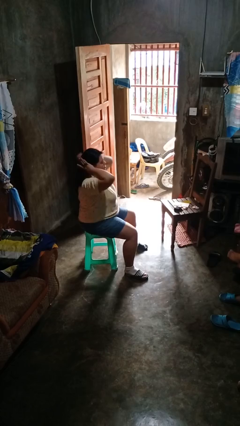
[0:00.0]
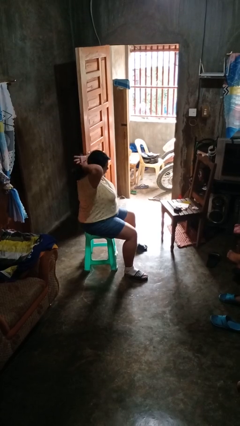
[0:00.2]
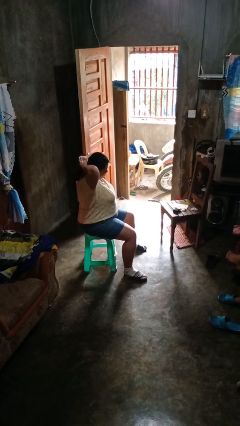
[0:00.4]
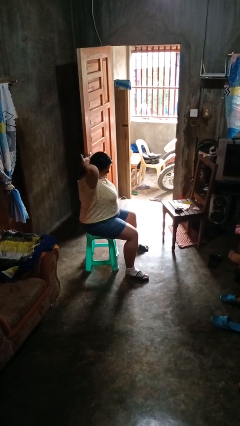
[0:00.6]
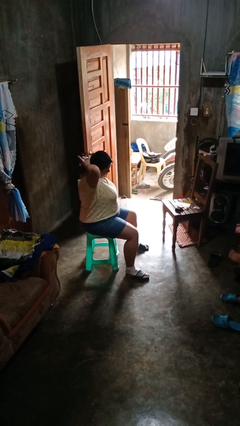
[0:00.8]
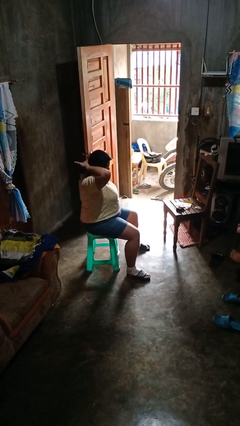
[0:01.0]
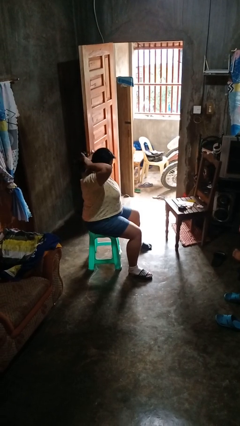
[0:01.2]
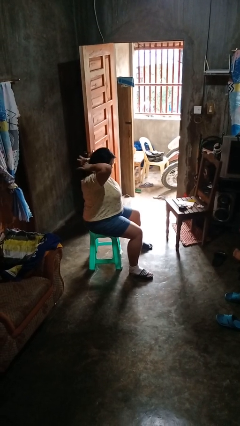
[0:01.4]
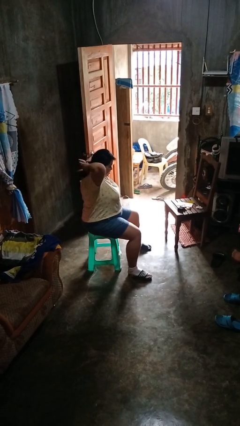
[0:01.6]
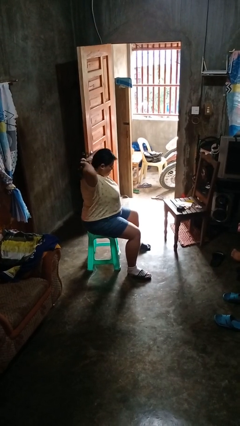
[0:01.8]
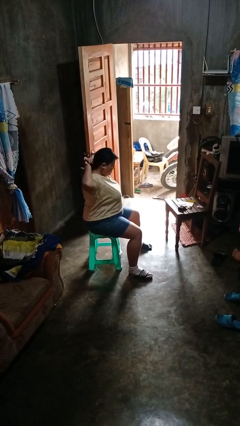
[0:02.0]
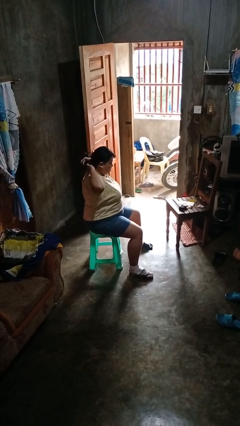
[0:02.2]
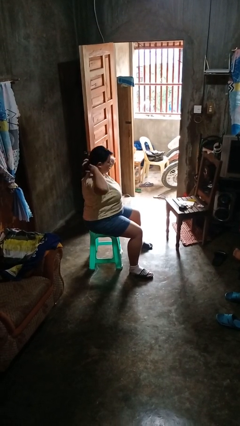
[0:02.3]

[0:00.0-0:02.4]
person puts hair in ponytail

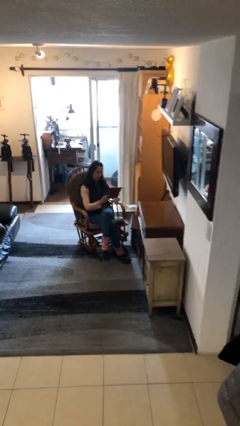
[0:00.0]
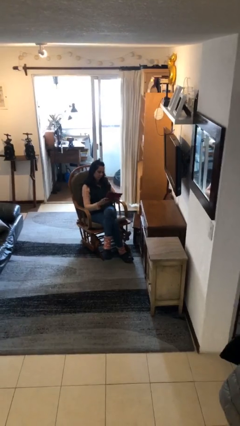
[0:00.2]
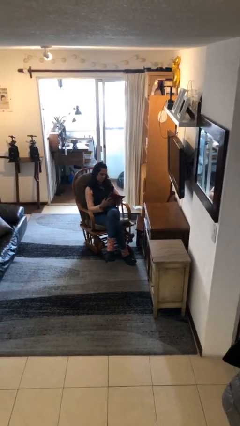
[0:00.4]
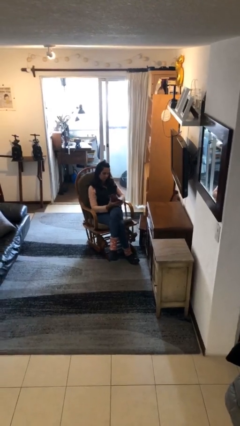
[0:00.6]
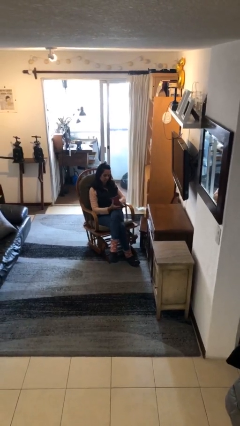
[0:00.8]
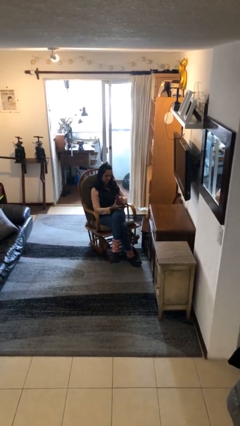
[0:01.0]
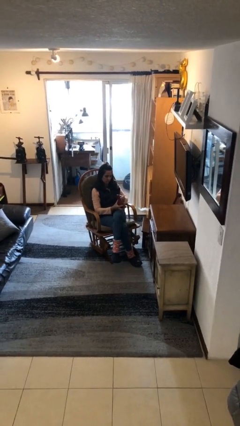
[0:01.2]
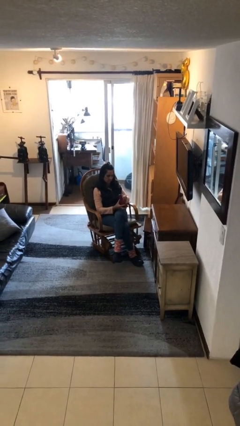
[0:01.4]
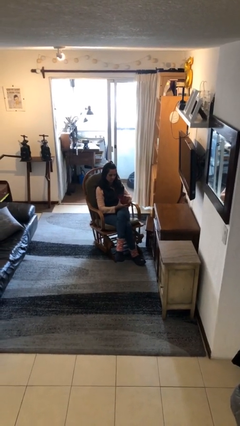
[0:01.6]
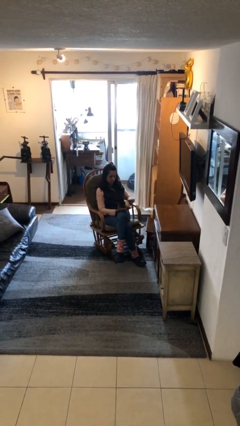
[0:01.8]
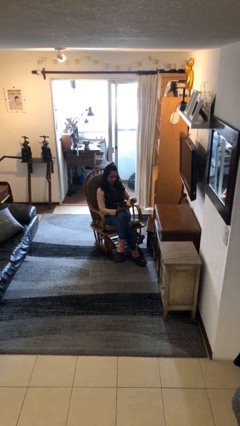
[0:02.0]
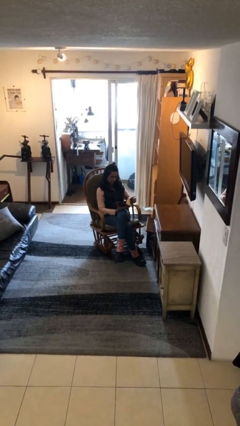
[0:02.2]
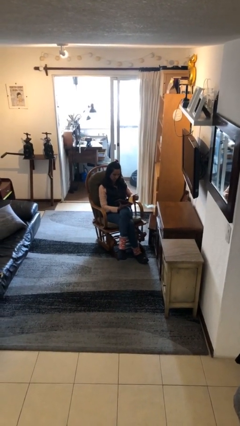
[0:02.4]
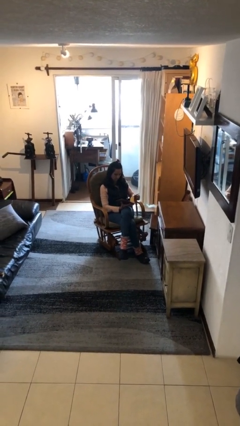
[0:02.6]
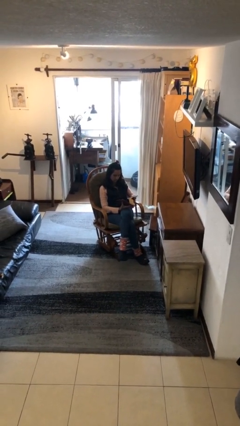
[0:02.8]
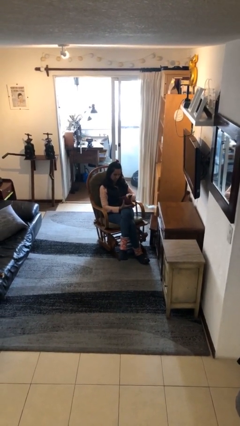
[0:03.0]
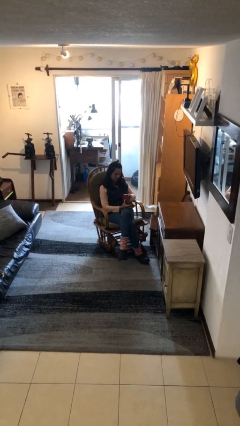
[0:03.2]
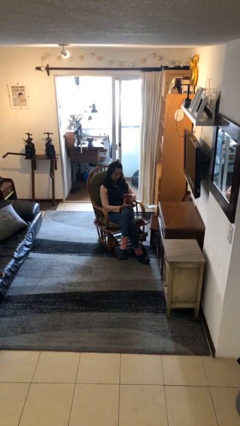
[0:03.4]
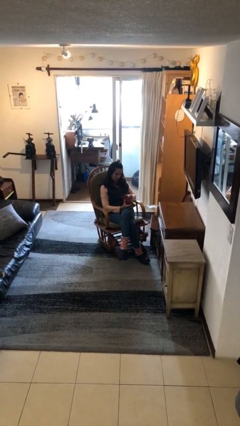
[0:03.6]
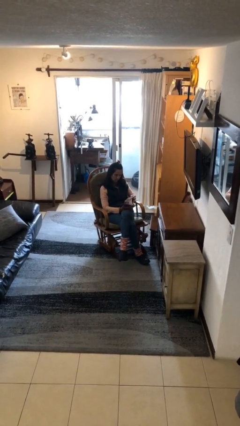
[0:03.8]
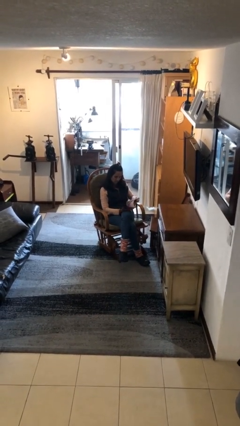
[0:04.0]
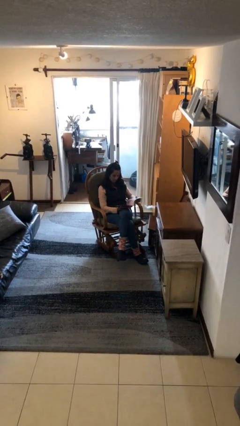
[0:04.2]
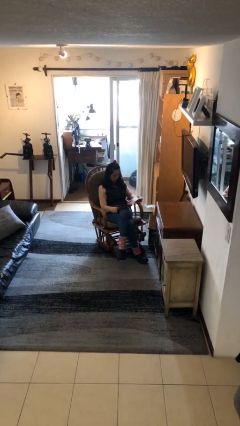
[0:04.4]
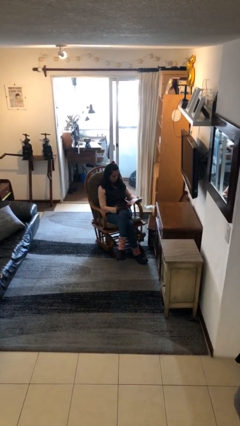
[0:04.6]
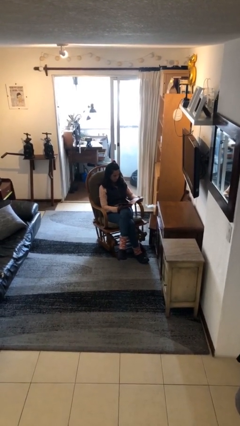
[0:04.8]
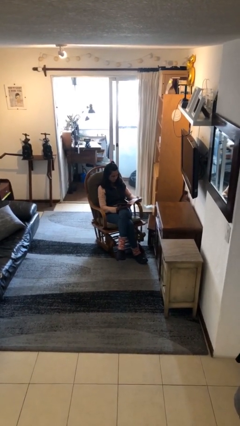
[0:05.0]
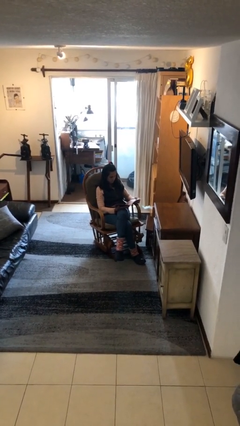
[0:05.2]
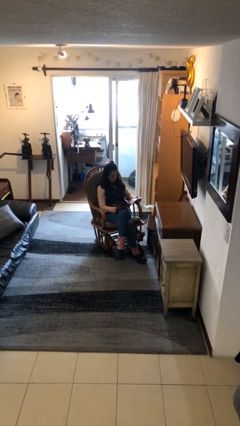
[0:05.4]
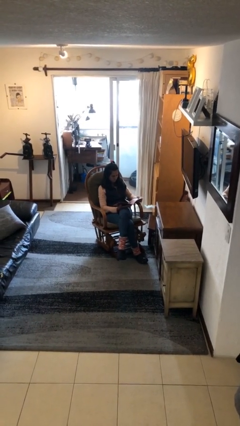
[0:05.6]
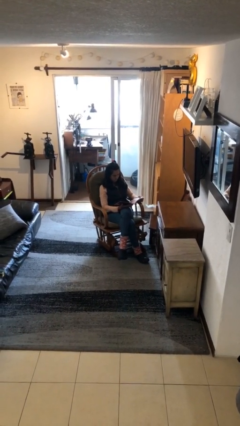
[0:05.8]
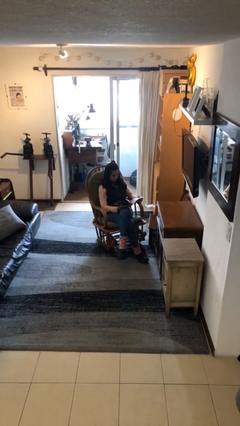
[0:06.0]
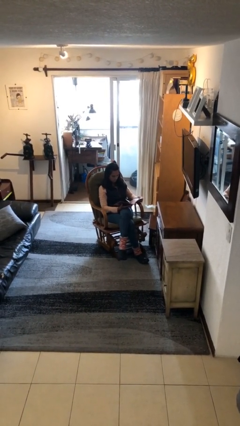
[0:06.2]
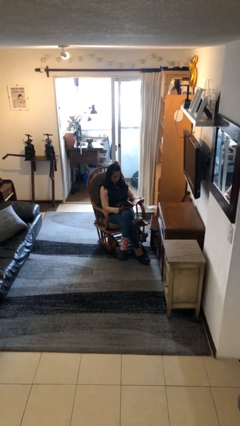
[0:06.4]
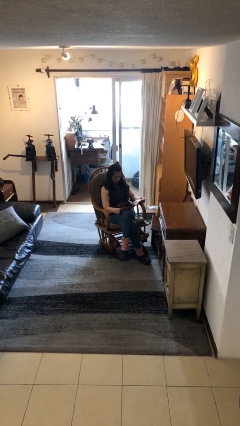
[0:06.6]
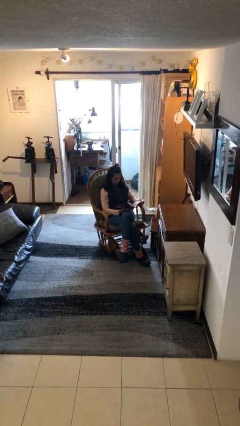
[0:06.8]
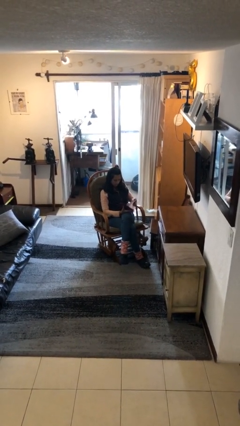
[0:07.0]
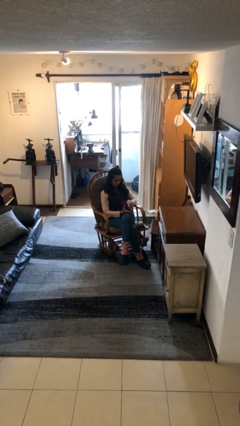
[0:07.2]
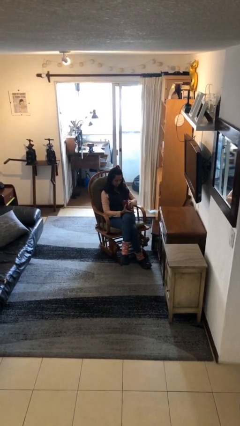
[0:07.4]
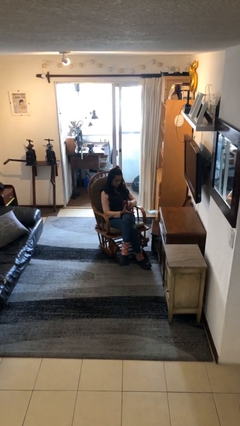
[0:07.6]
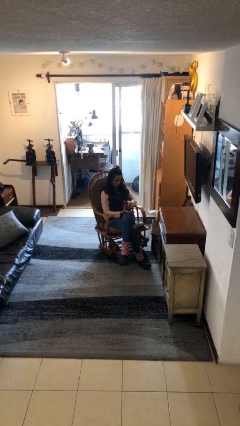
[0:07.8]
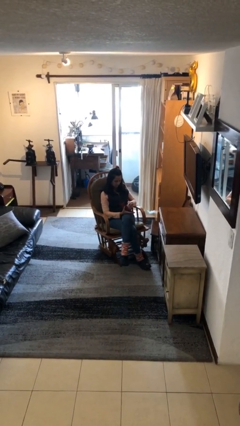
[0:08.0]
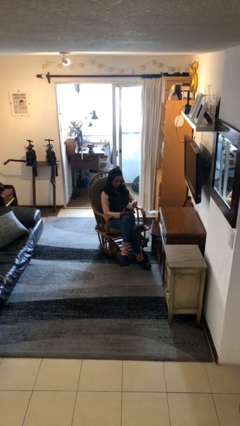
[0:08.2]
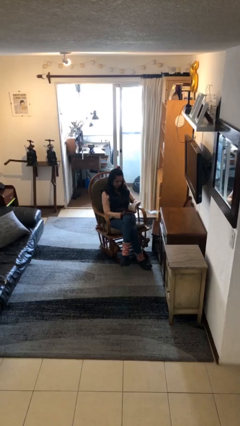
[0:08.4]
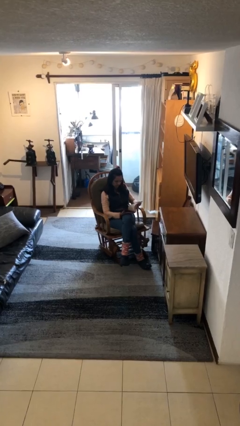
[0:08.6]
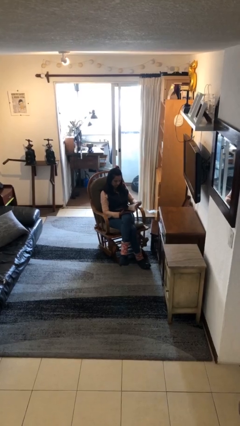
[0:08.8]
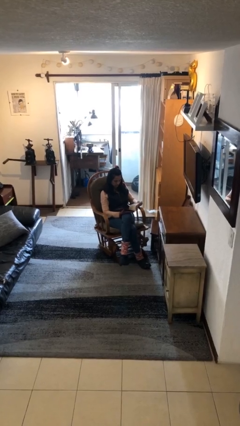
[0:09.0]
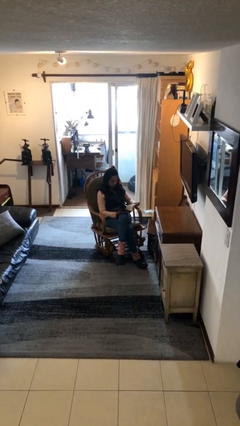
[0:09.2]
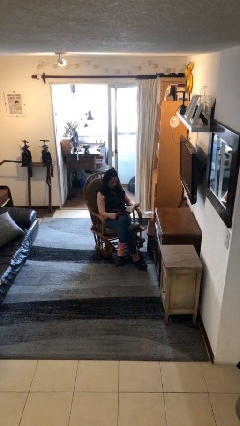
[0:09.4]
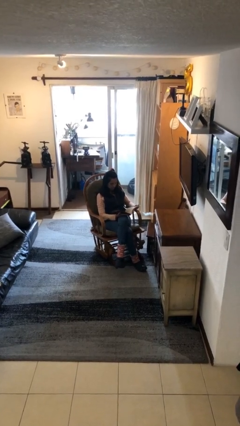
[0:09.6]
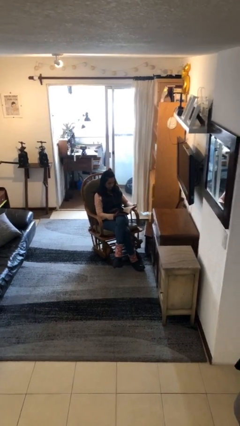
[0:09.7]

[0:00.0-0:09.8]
person reads document

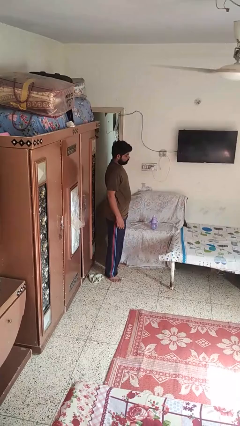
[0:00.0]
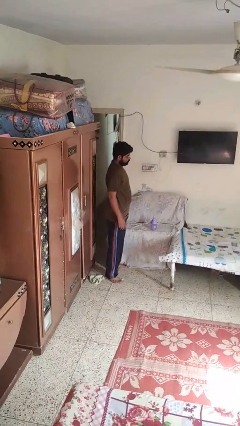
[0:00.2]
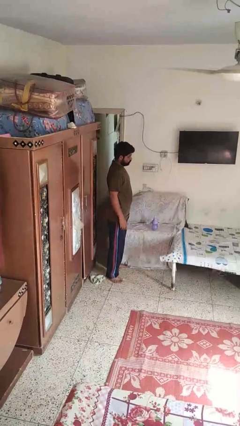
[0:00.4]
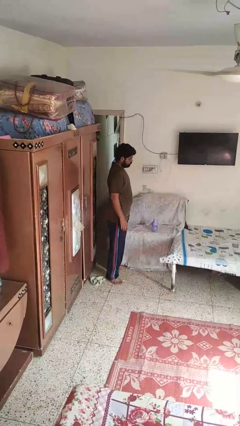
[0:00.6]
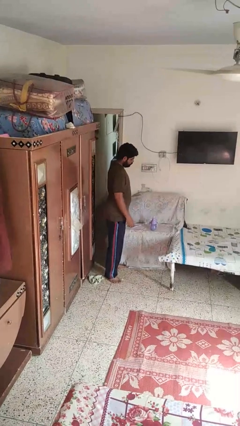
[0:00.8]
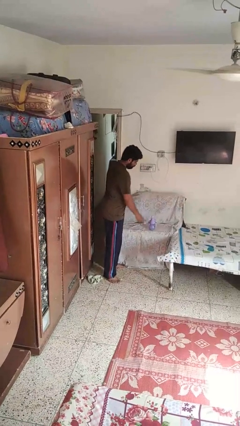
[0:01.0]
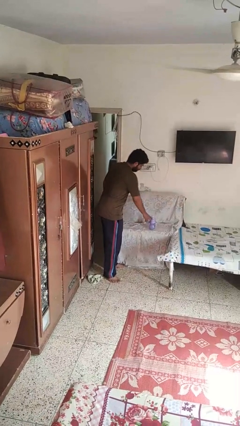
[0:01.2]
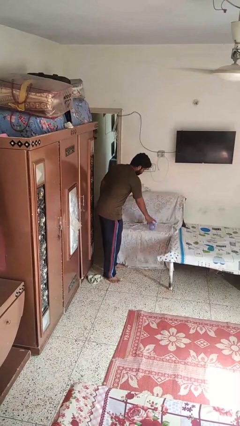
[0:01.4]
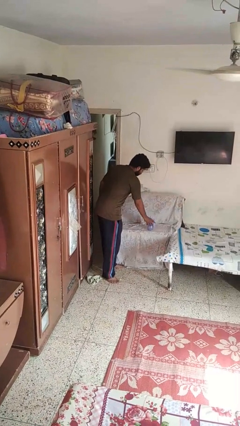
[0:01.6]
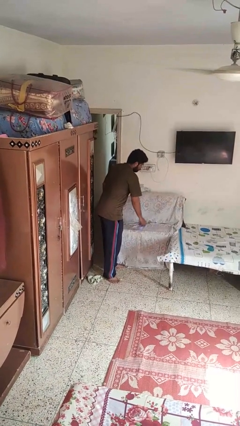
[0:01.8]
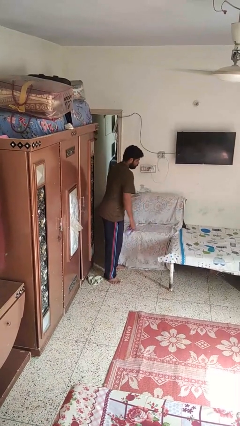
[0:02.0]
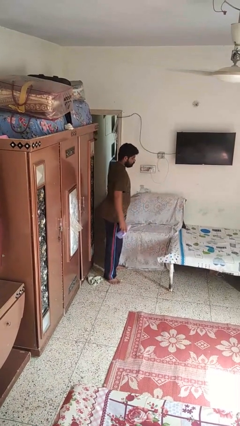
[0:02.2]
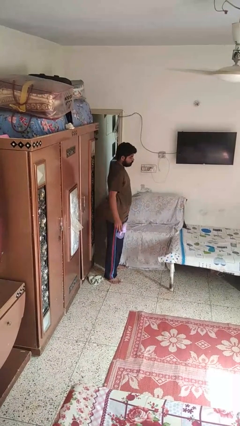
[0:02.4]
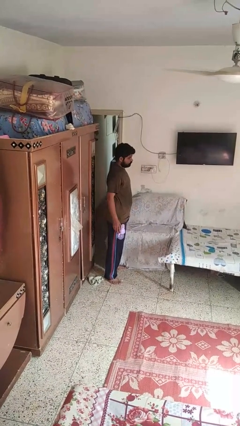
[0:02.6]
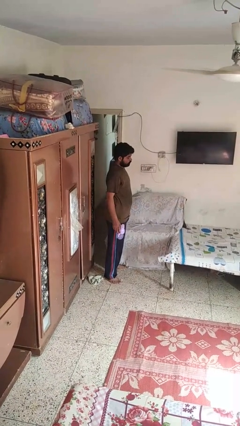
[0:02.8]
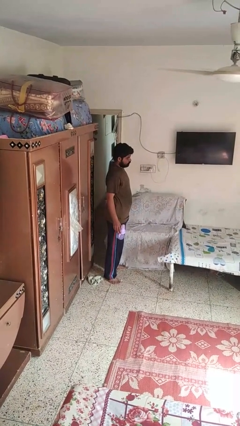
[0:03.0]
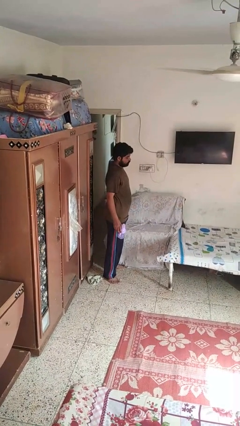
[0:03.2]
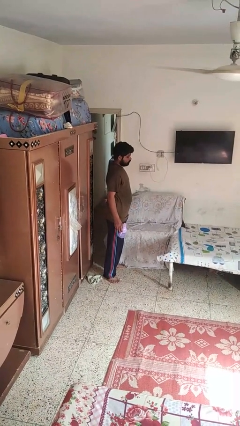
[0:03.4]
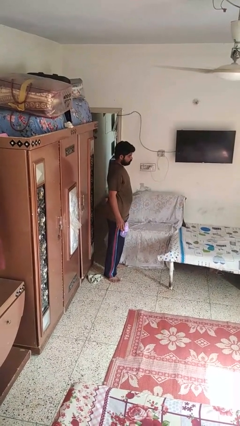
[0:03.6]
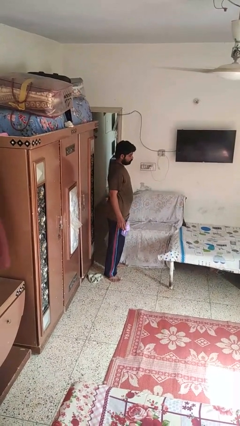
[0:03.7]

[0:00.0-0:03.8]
person picks up object from couch

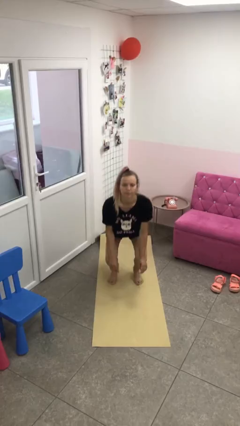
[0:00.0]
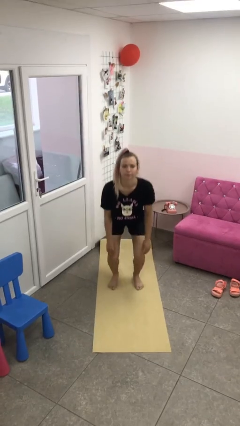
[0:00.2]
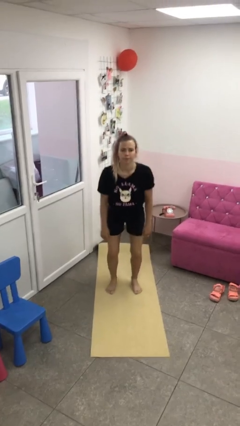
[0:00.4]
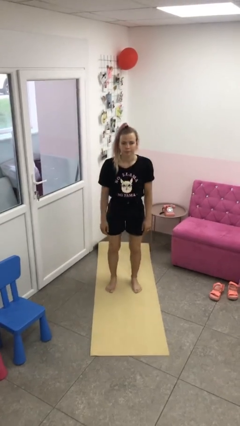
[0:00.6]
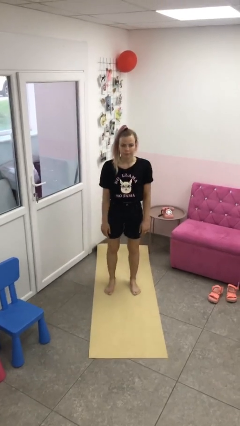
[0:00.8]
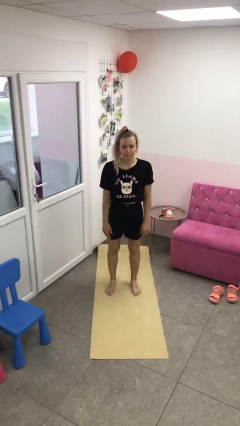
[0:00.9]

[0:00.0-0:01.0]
person stands up

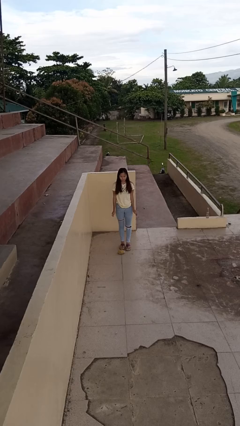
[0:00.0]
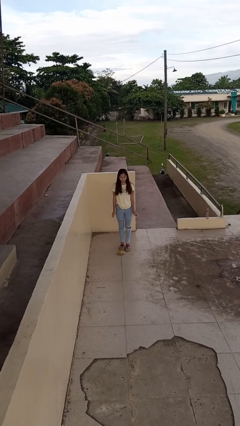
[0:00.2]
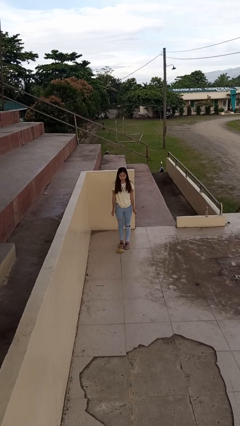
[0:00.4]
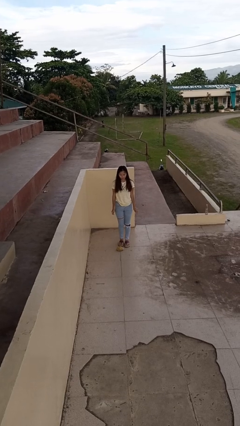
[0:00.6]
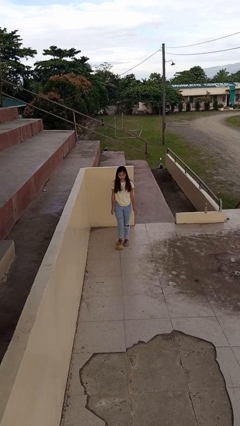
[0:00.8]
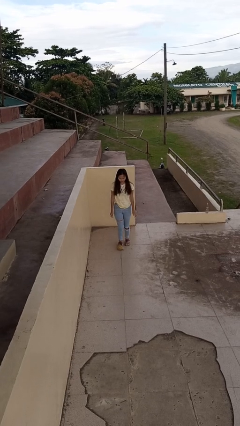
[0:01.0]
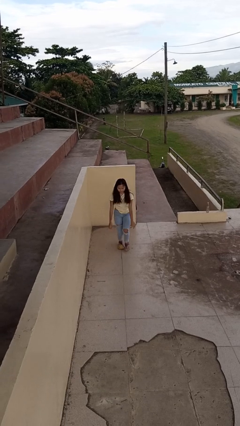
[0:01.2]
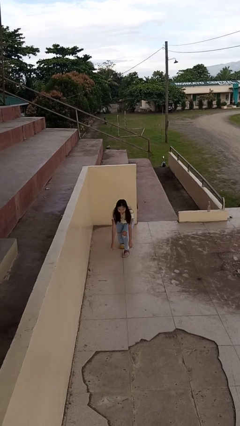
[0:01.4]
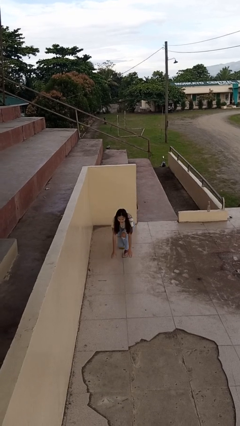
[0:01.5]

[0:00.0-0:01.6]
person trips on object on floor
